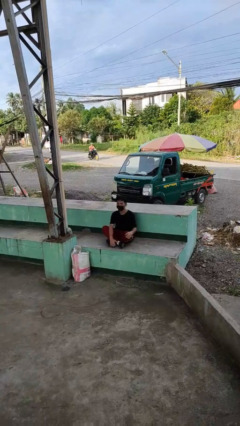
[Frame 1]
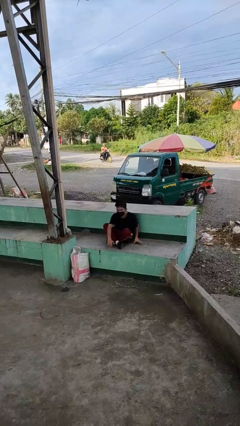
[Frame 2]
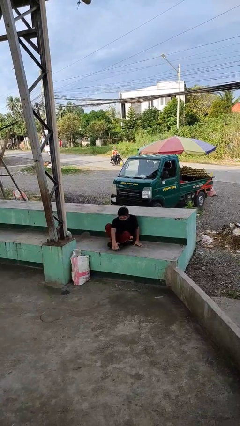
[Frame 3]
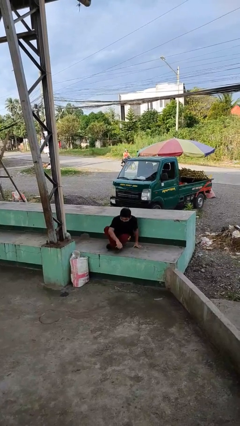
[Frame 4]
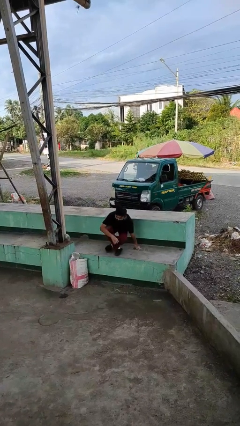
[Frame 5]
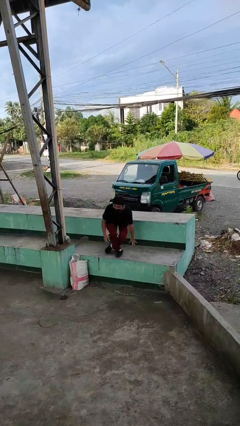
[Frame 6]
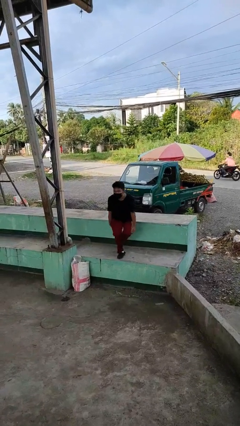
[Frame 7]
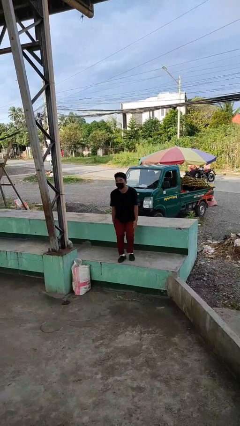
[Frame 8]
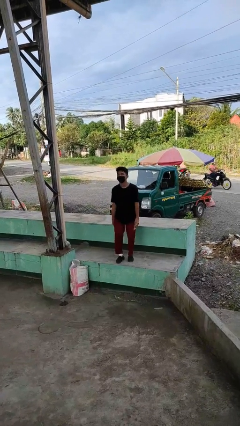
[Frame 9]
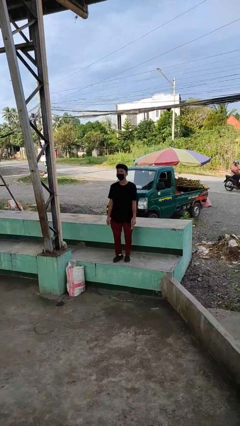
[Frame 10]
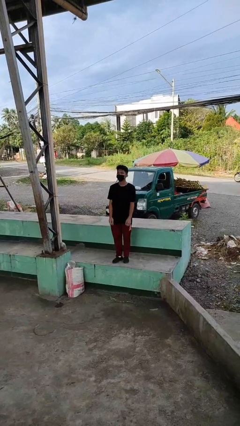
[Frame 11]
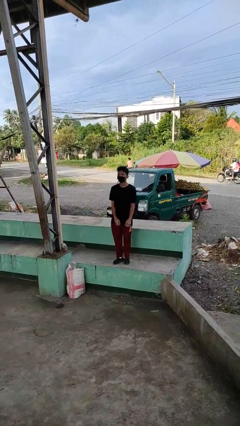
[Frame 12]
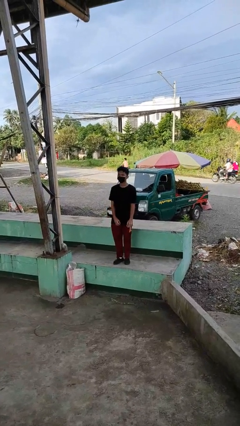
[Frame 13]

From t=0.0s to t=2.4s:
person stands up from floor

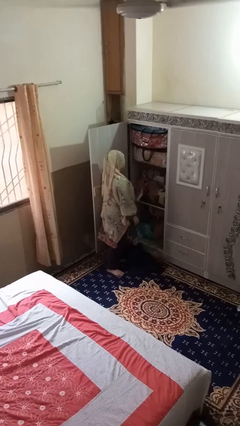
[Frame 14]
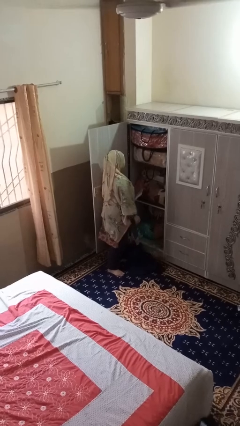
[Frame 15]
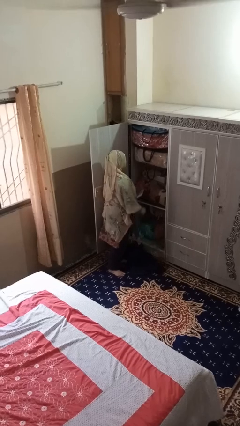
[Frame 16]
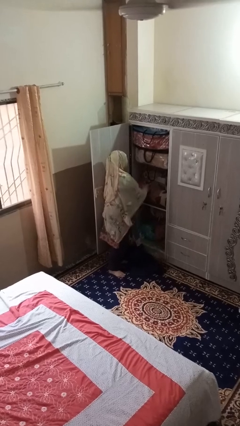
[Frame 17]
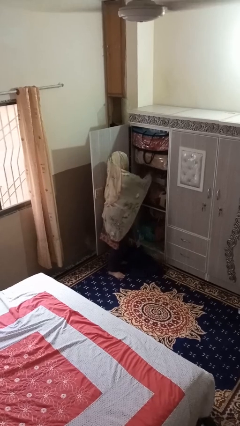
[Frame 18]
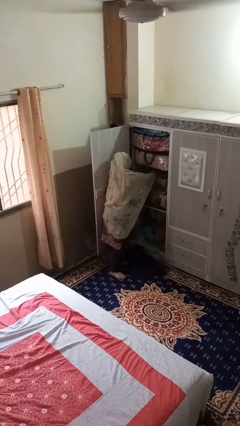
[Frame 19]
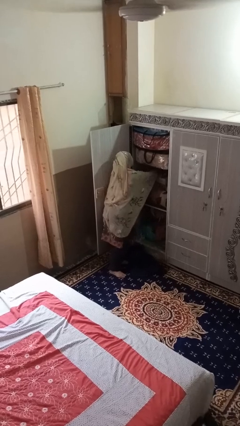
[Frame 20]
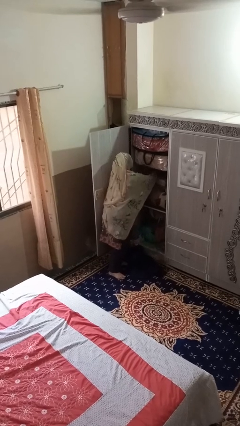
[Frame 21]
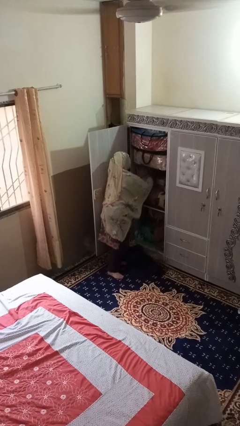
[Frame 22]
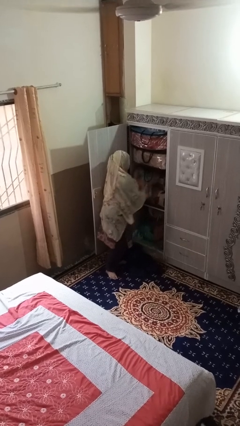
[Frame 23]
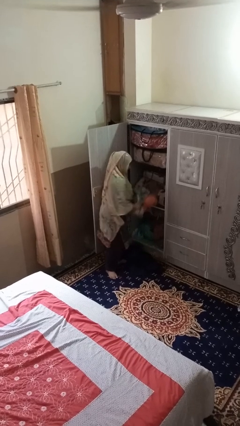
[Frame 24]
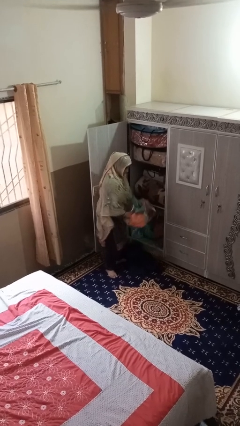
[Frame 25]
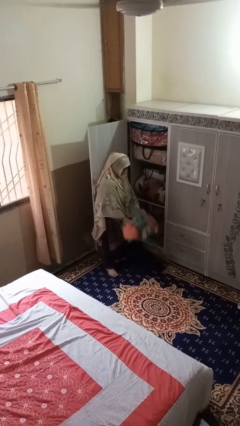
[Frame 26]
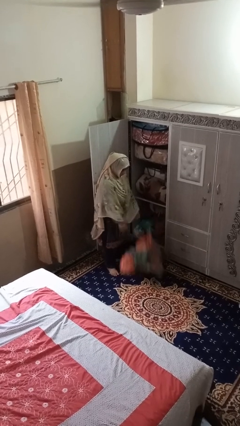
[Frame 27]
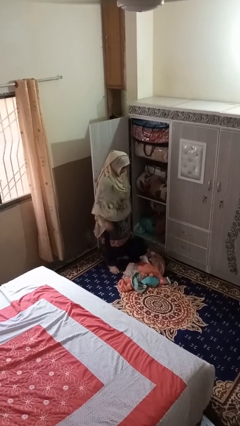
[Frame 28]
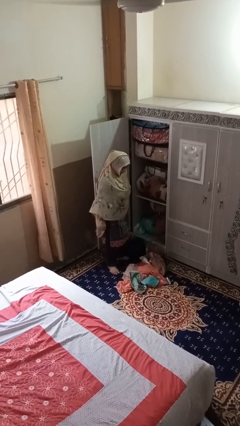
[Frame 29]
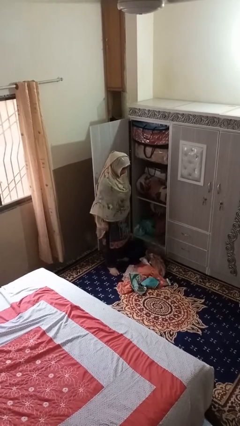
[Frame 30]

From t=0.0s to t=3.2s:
person puts clothes into dresser

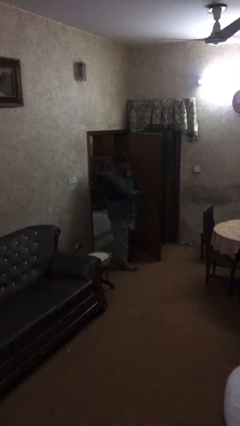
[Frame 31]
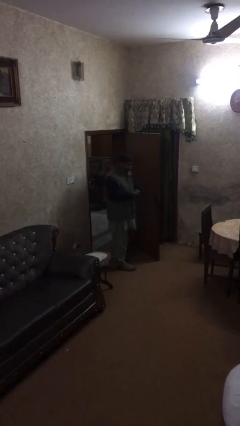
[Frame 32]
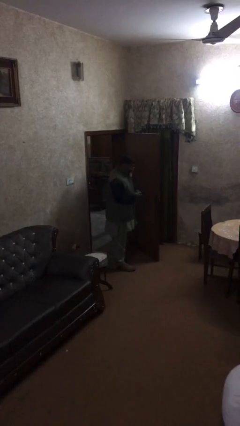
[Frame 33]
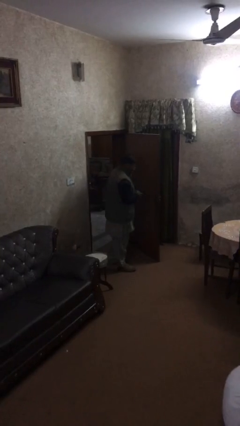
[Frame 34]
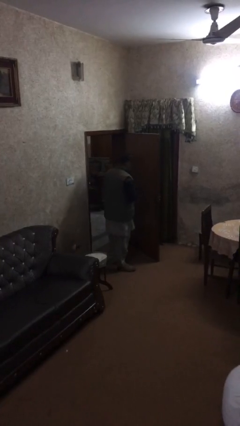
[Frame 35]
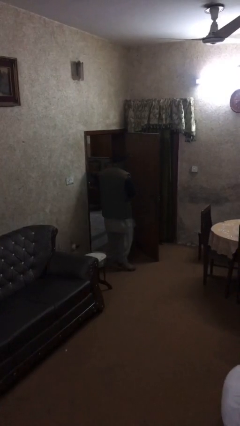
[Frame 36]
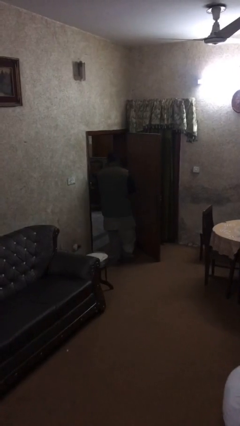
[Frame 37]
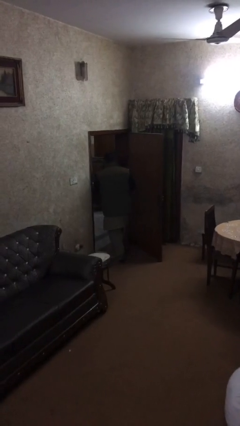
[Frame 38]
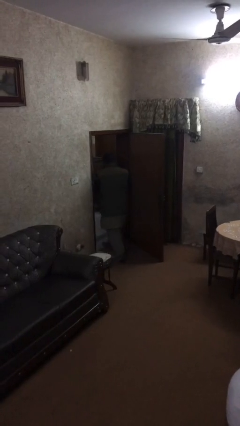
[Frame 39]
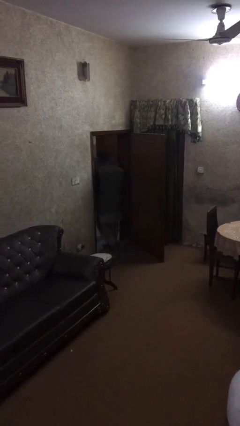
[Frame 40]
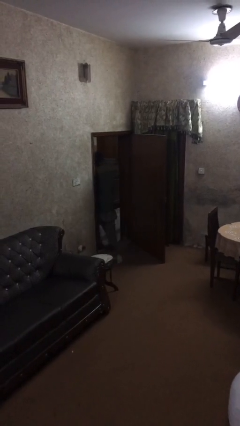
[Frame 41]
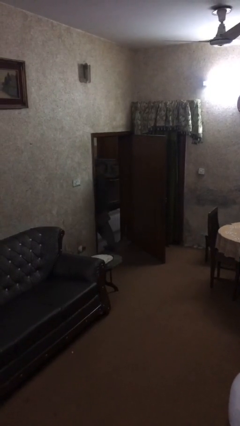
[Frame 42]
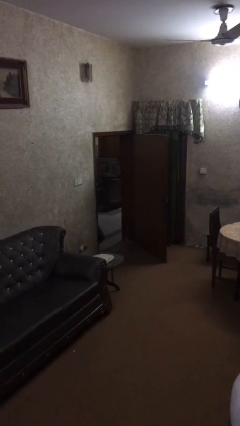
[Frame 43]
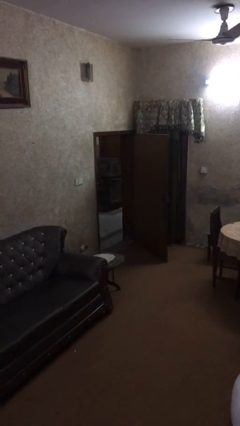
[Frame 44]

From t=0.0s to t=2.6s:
person exits scene through structure

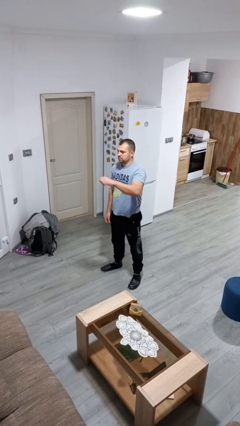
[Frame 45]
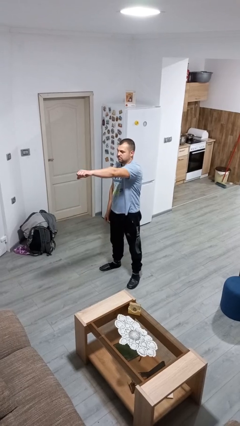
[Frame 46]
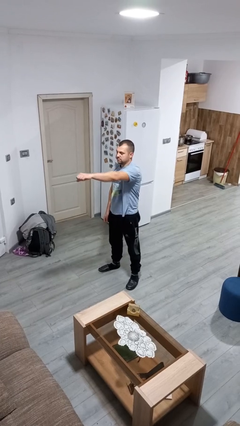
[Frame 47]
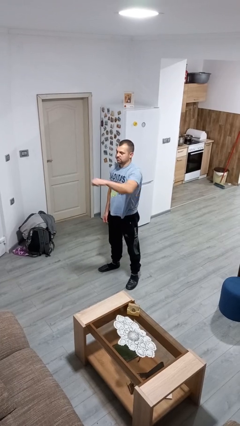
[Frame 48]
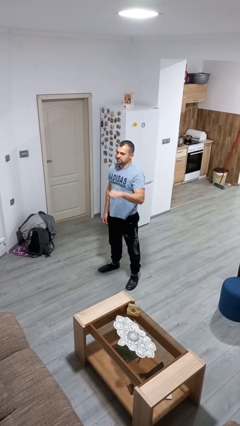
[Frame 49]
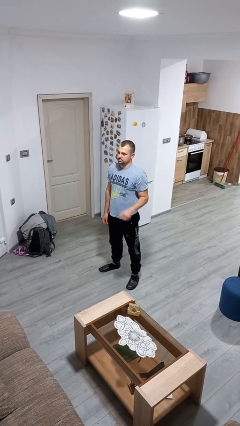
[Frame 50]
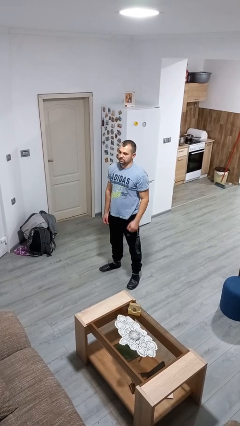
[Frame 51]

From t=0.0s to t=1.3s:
person punches

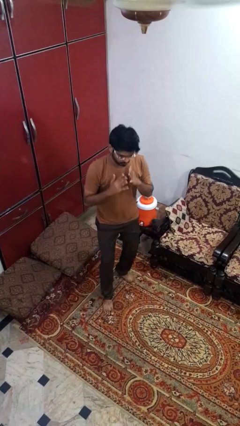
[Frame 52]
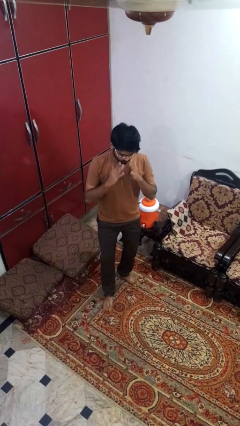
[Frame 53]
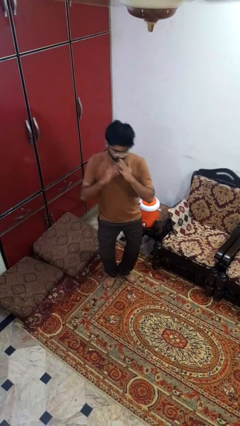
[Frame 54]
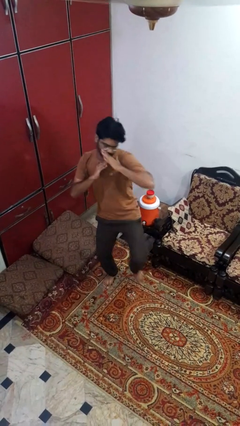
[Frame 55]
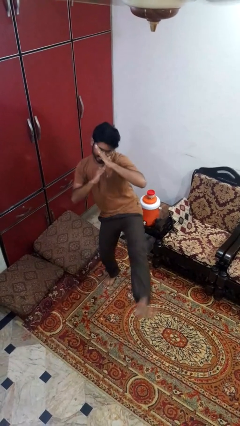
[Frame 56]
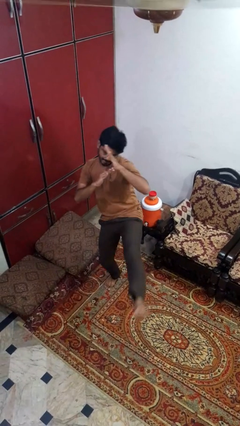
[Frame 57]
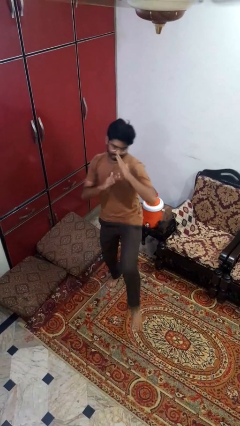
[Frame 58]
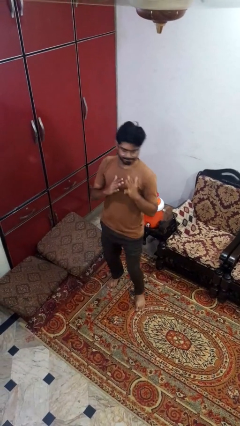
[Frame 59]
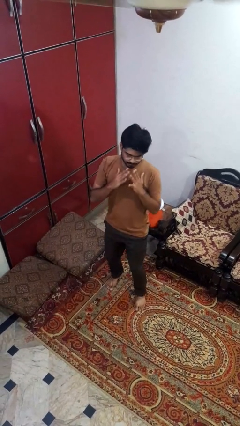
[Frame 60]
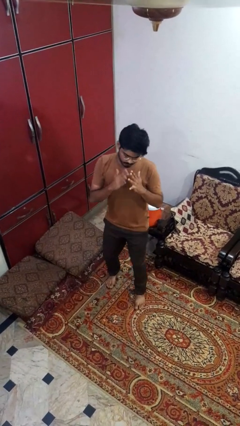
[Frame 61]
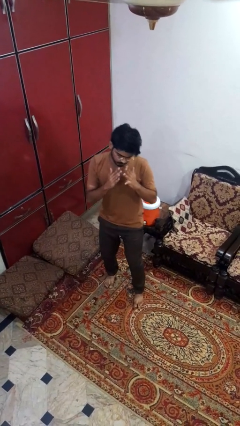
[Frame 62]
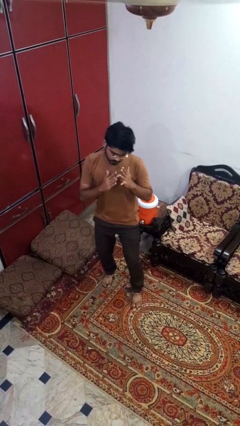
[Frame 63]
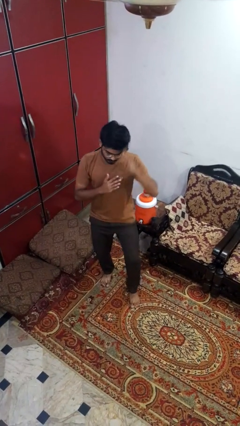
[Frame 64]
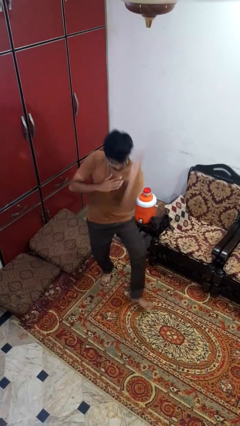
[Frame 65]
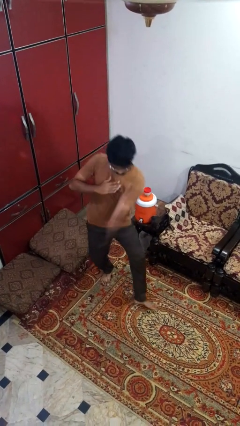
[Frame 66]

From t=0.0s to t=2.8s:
person karate kicks

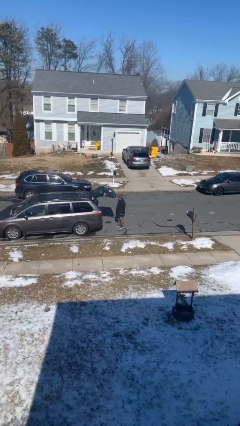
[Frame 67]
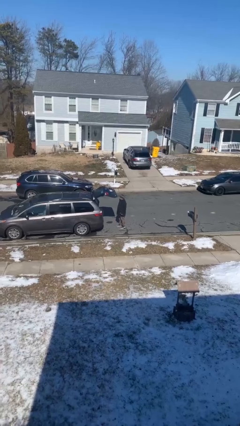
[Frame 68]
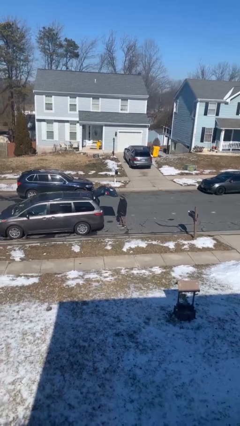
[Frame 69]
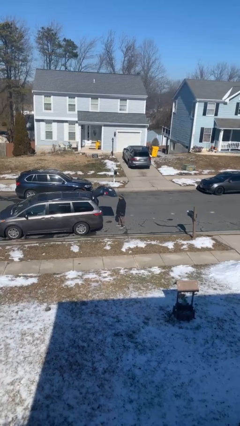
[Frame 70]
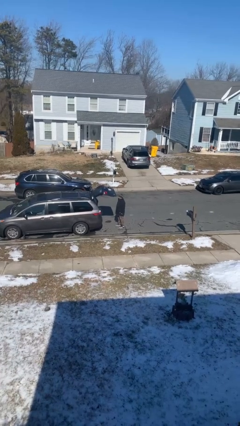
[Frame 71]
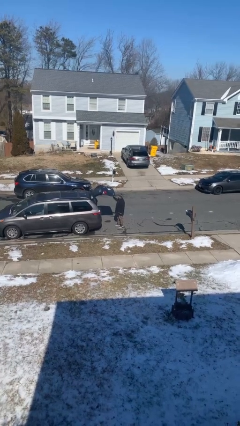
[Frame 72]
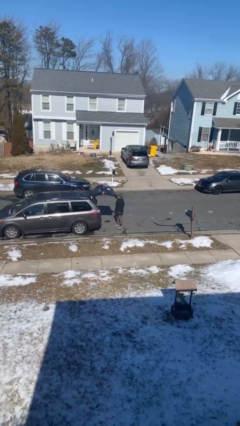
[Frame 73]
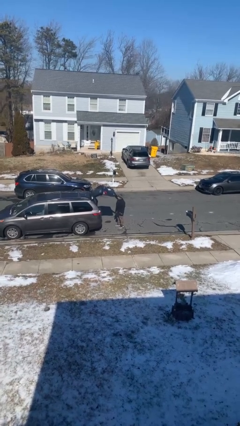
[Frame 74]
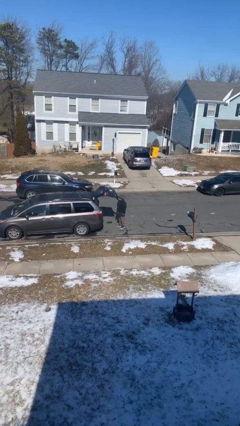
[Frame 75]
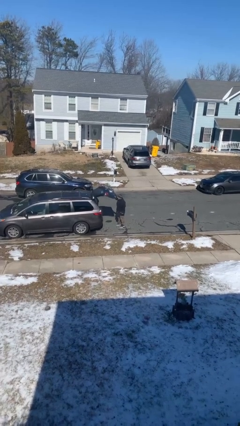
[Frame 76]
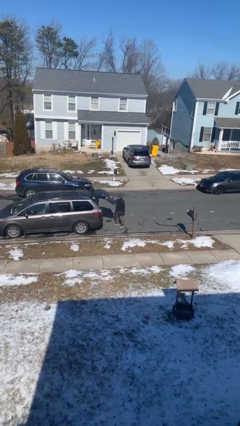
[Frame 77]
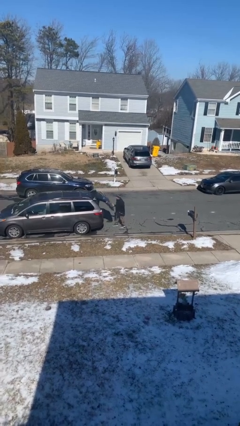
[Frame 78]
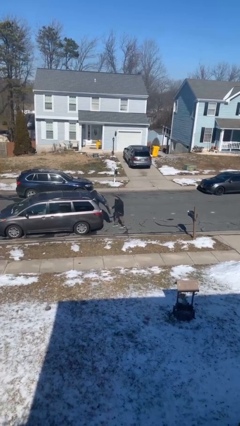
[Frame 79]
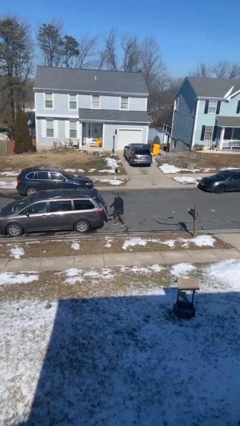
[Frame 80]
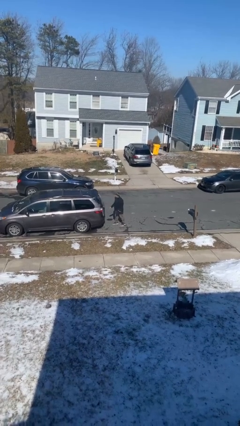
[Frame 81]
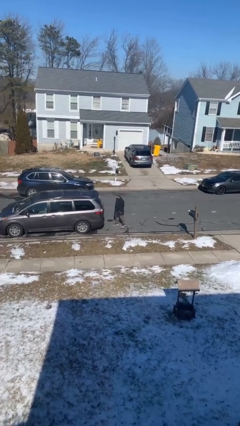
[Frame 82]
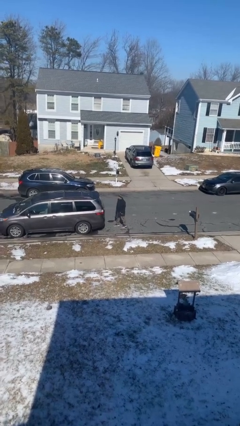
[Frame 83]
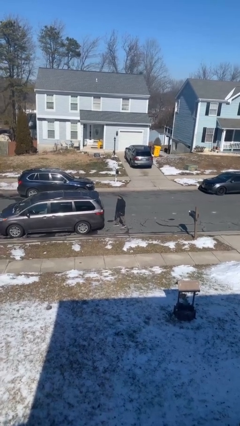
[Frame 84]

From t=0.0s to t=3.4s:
person closes car trunk

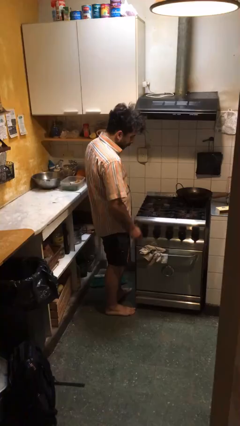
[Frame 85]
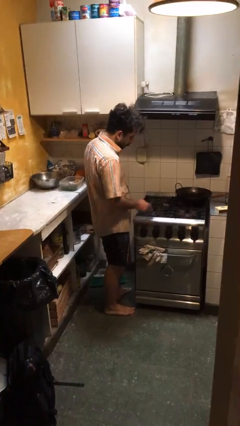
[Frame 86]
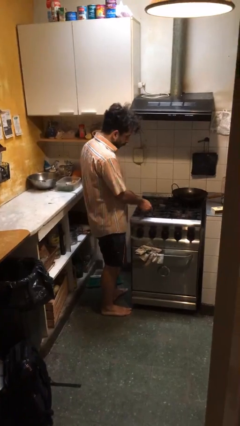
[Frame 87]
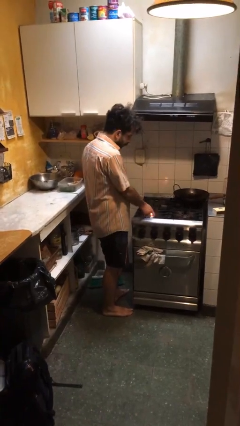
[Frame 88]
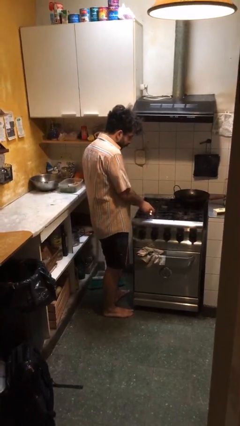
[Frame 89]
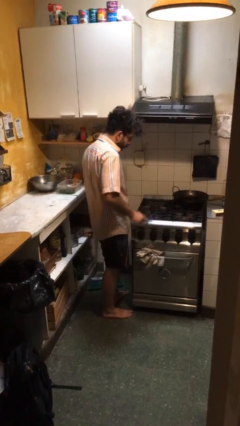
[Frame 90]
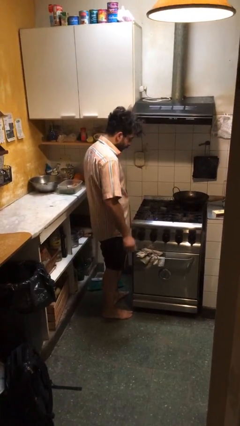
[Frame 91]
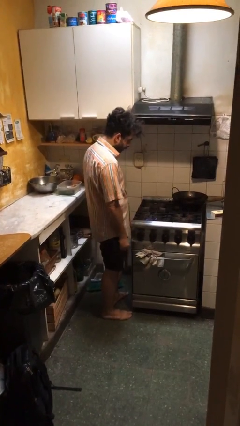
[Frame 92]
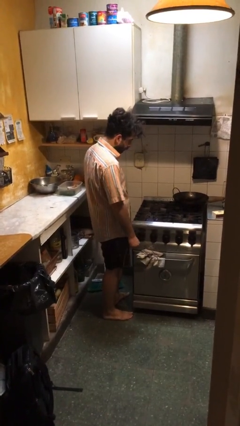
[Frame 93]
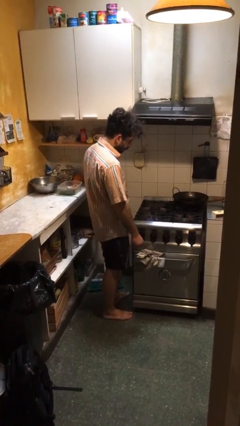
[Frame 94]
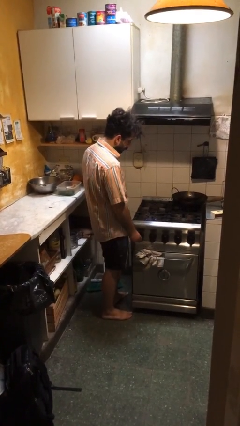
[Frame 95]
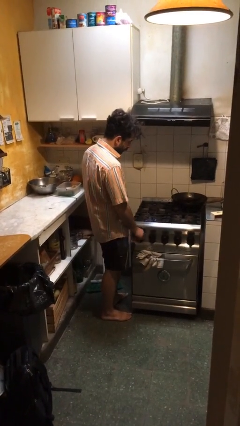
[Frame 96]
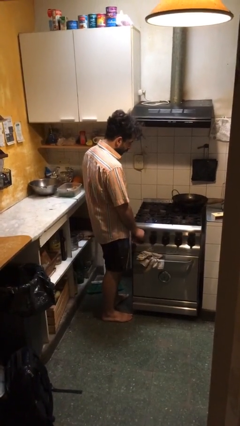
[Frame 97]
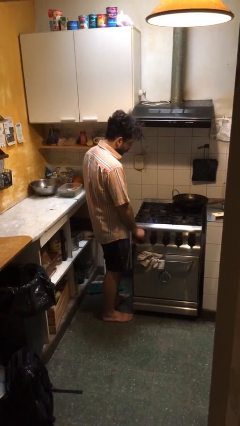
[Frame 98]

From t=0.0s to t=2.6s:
person turns on stovetop
